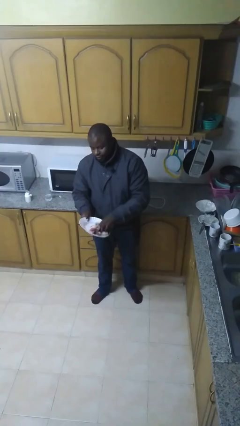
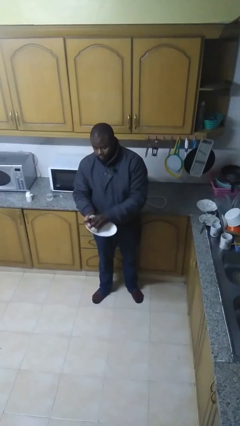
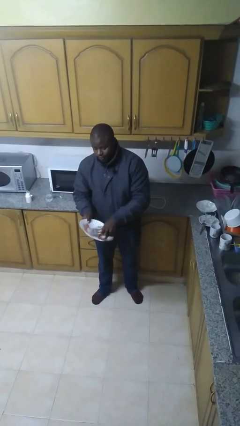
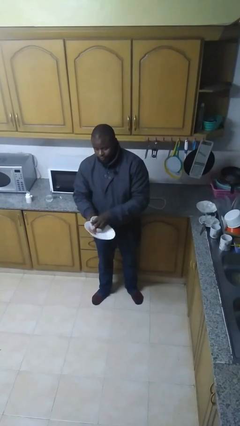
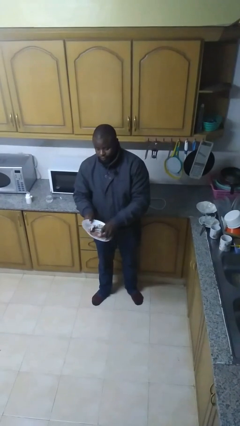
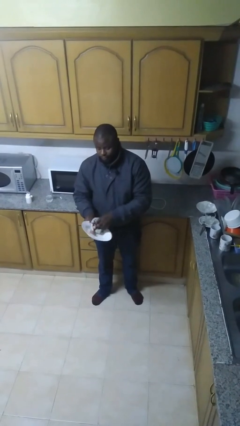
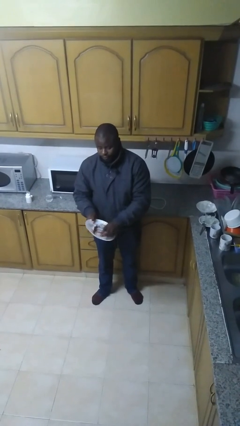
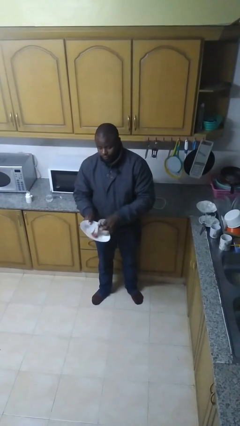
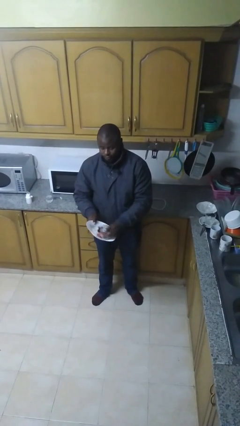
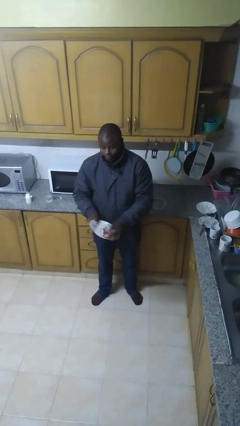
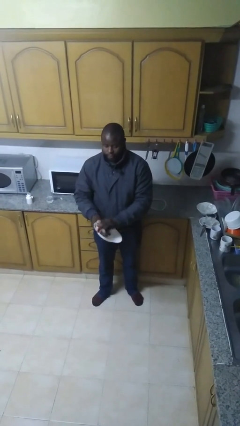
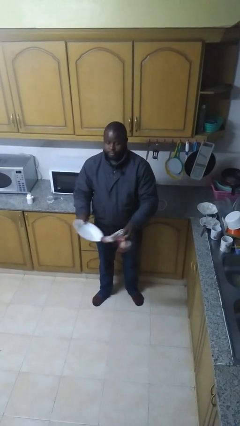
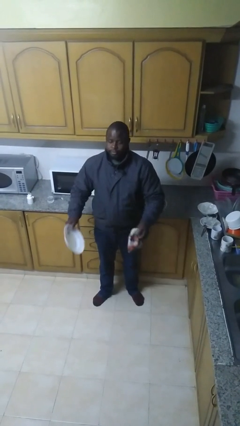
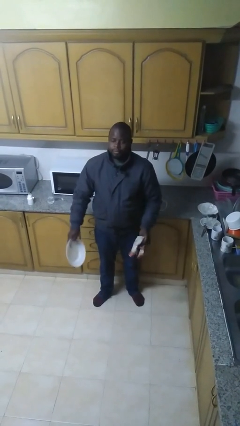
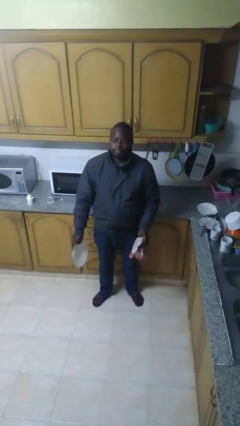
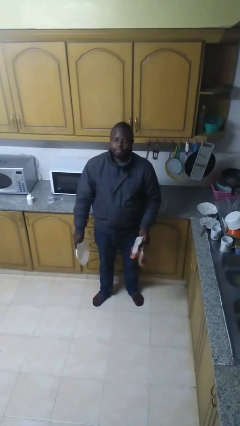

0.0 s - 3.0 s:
person dries dish

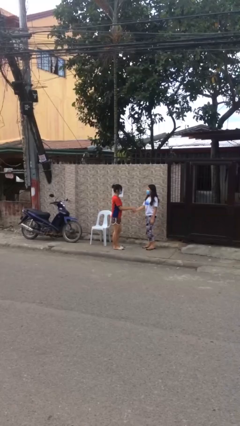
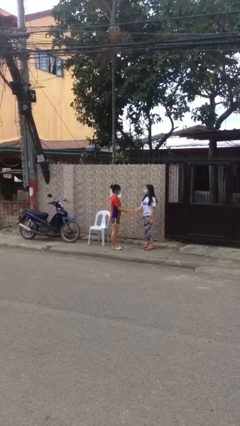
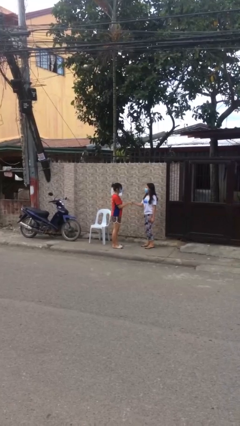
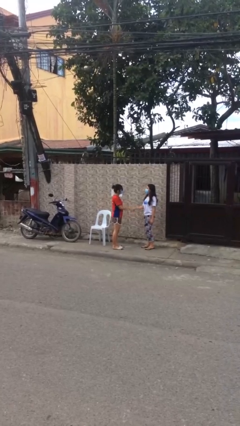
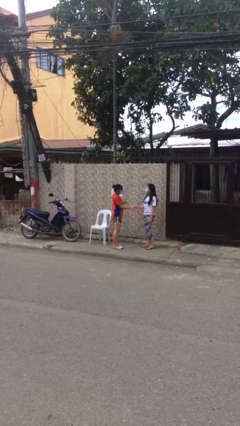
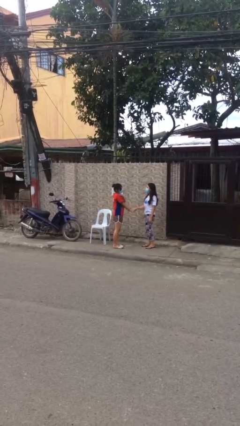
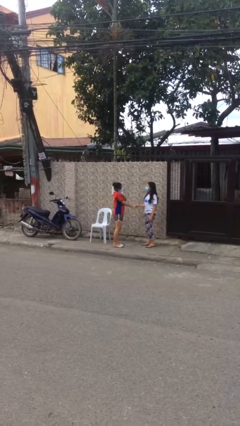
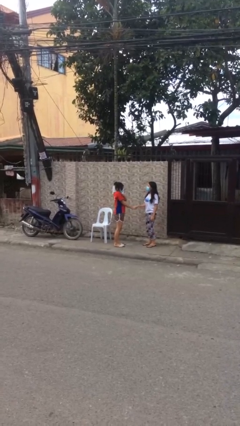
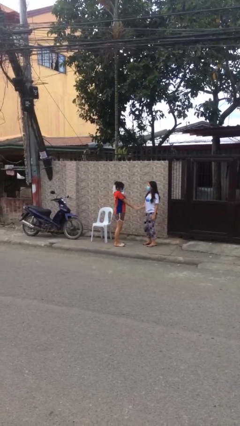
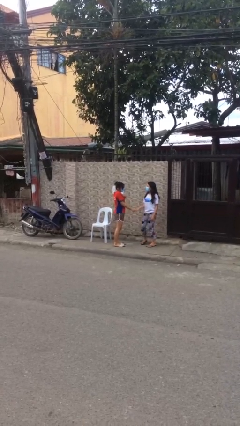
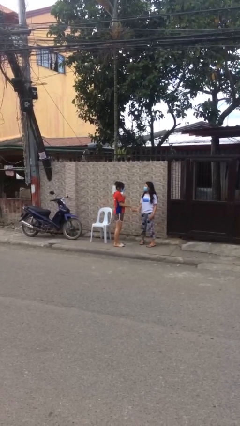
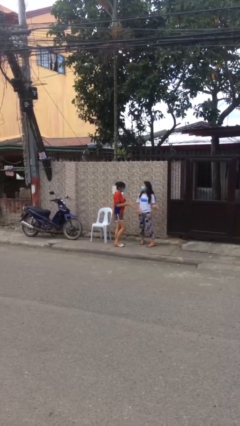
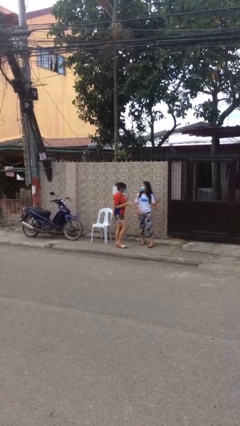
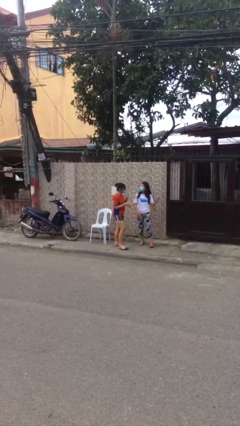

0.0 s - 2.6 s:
person shakes hand

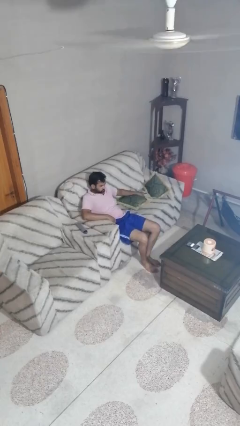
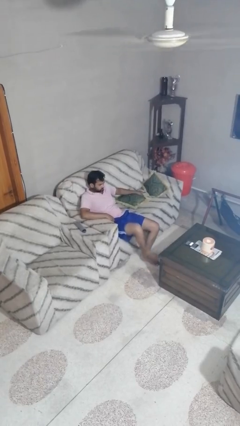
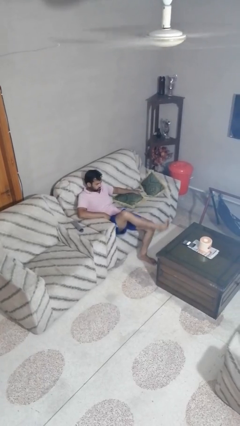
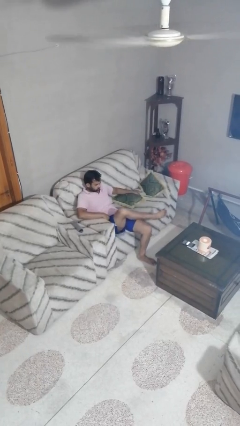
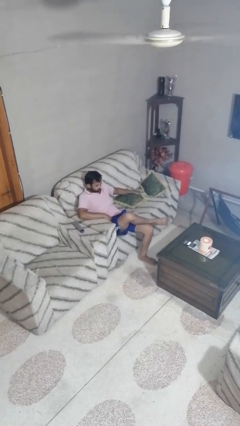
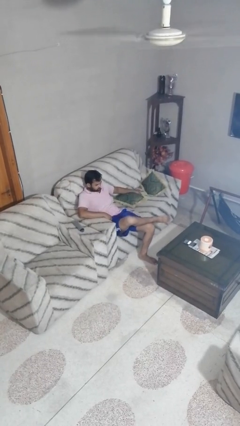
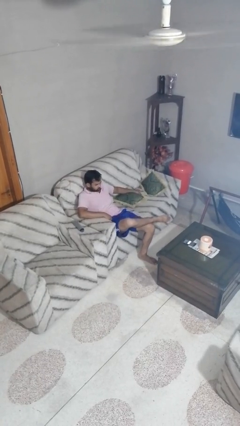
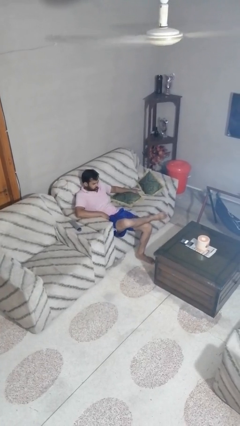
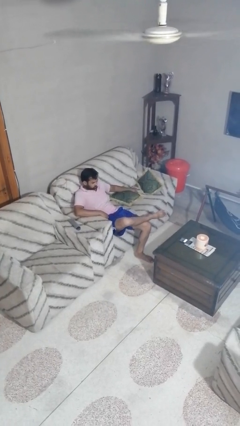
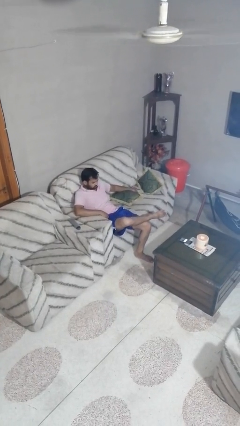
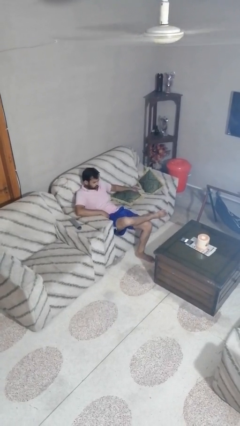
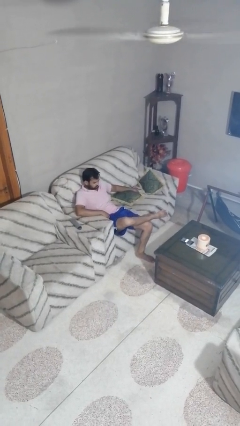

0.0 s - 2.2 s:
person crosses legs

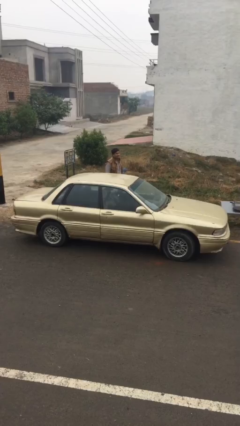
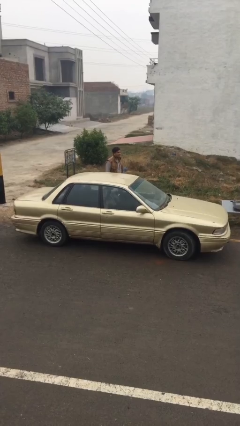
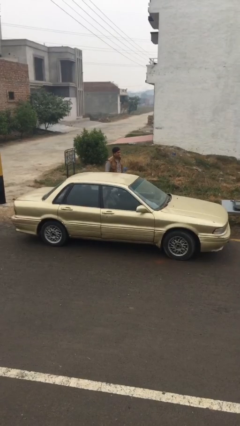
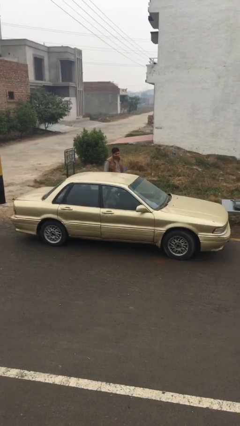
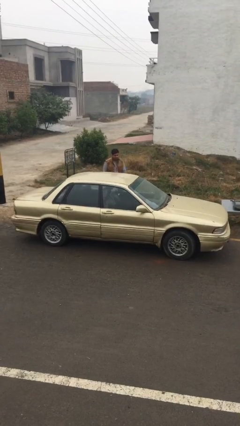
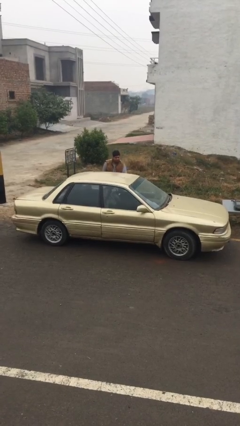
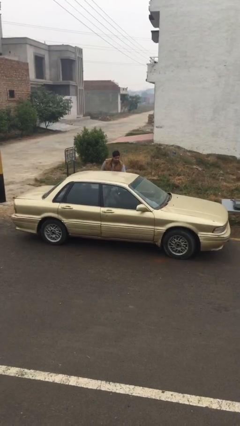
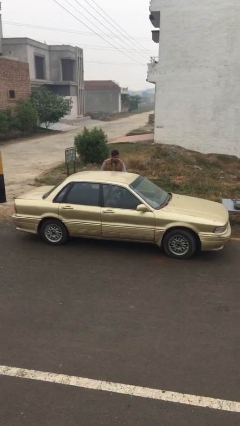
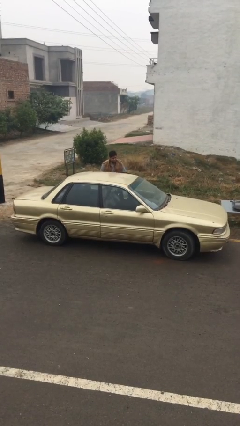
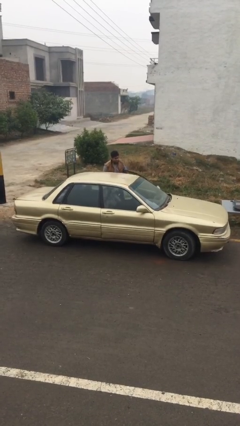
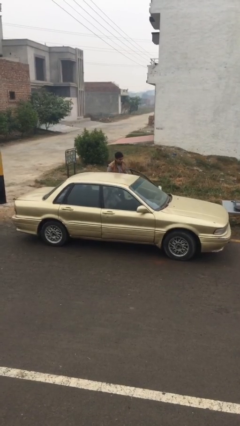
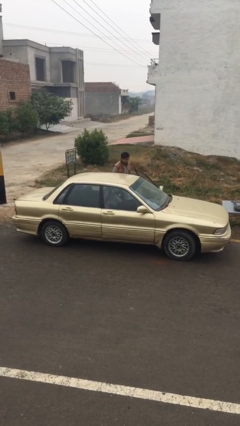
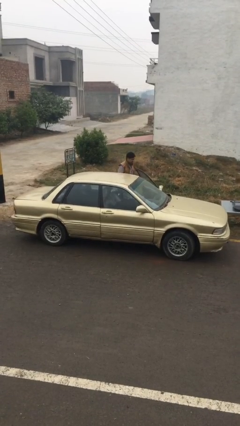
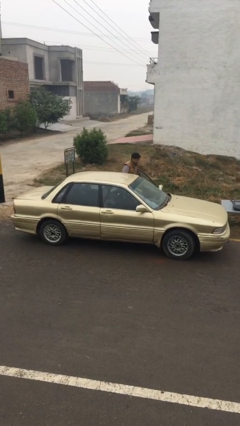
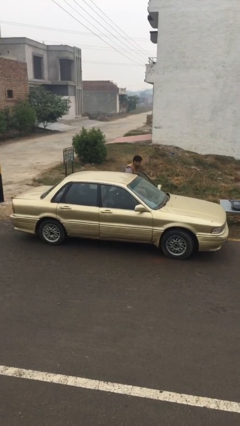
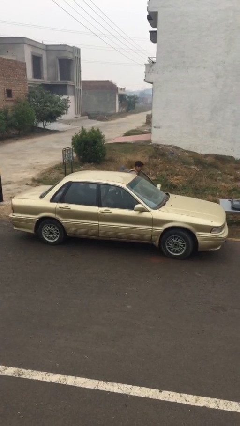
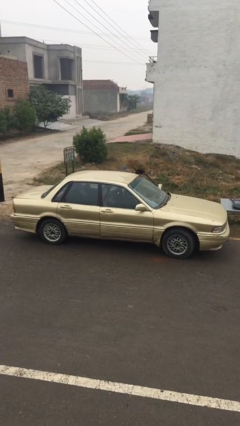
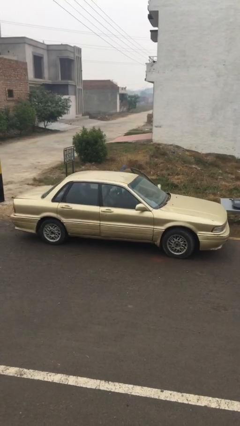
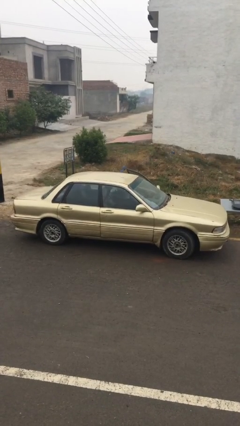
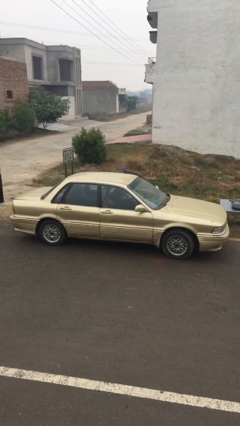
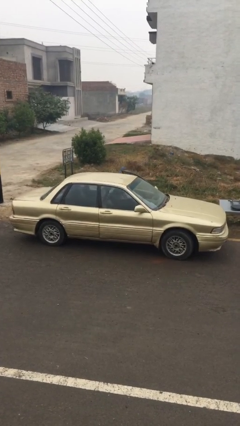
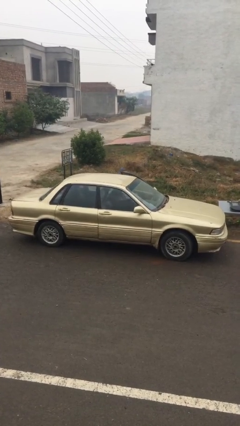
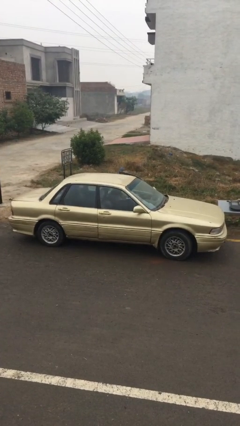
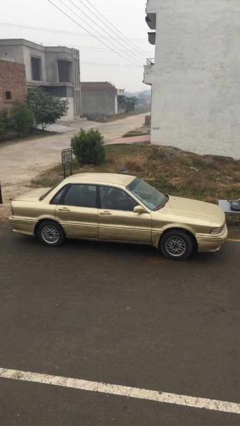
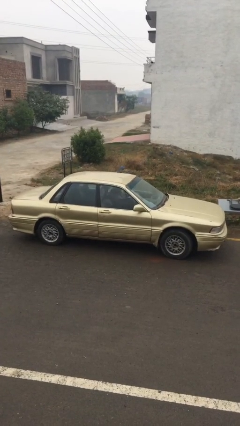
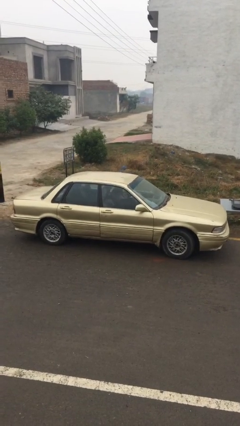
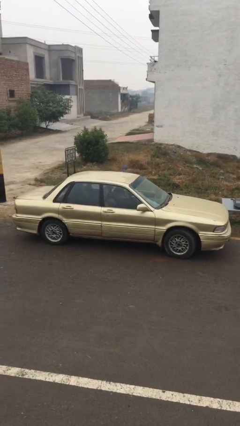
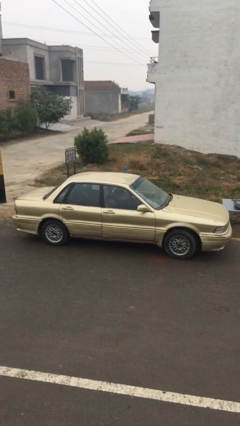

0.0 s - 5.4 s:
car picks up person

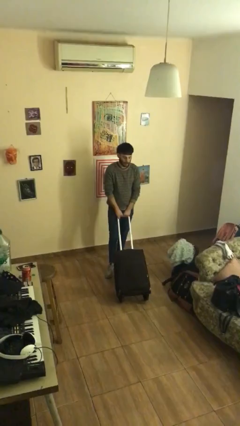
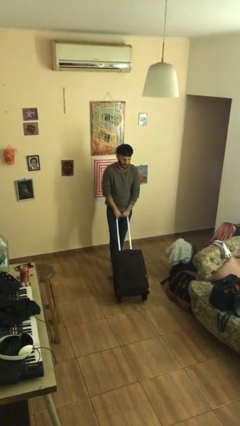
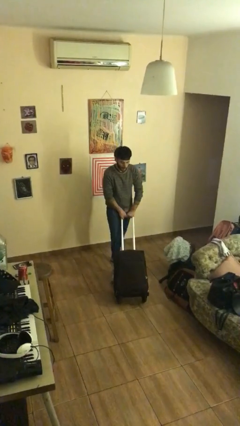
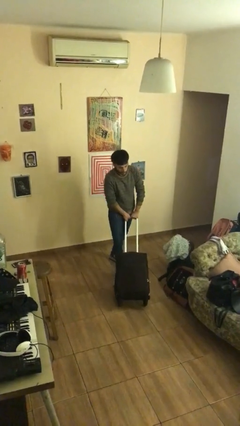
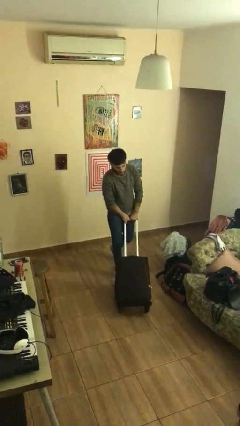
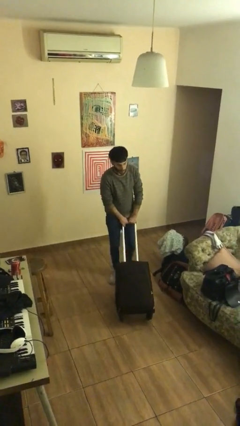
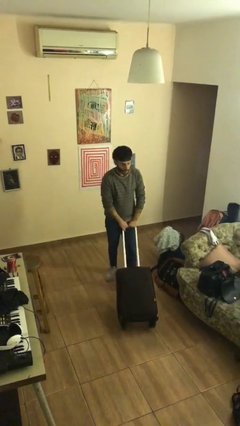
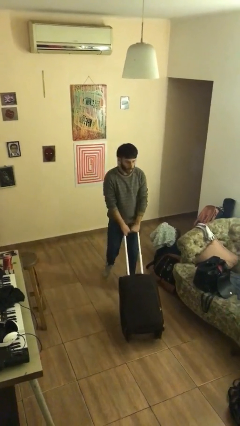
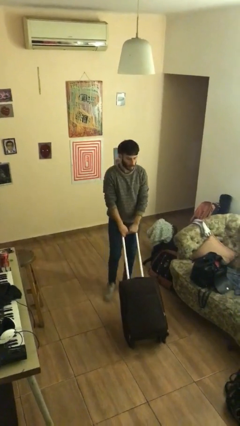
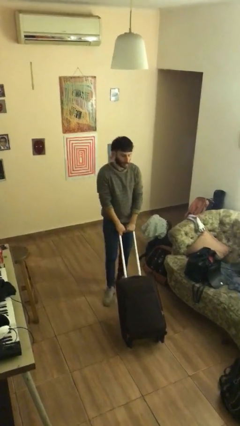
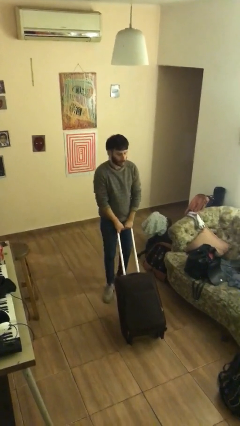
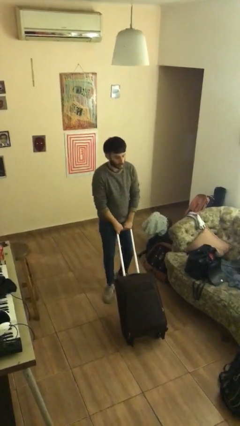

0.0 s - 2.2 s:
person pushes wheeled cart

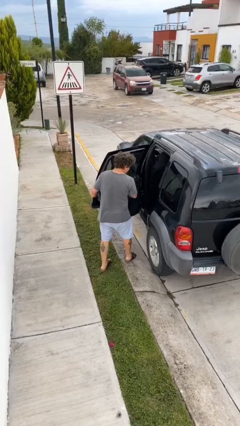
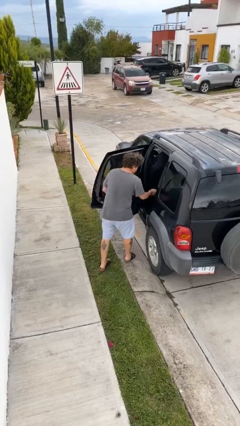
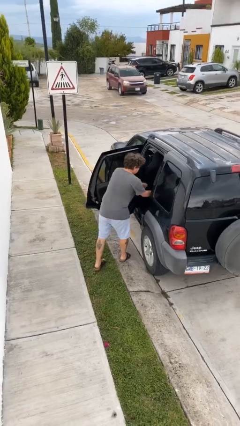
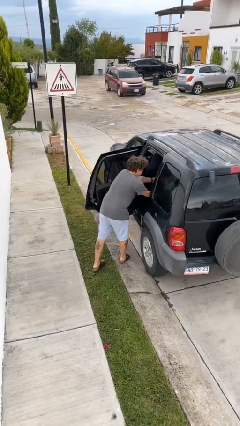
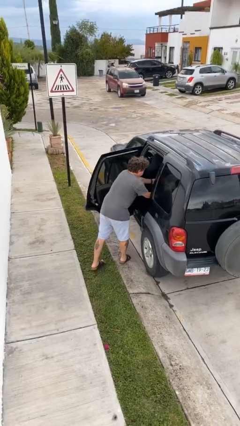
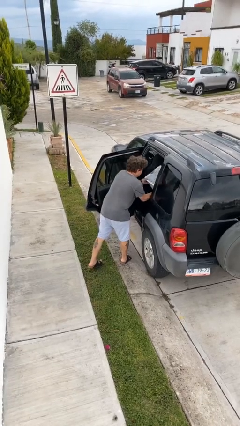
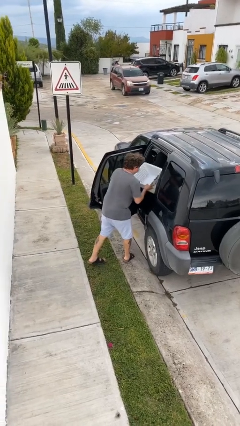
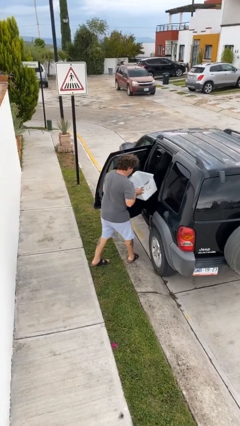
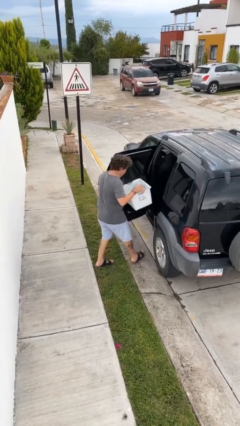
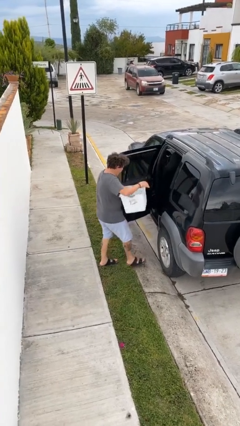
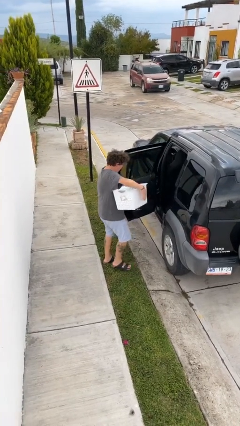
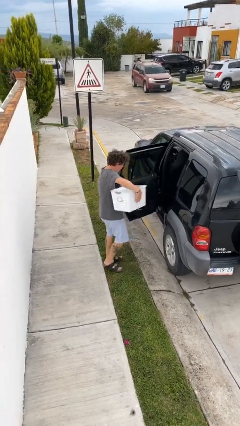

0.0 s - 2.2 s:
person unloads car
